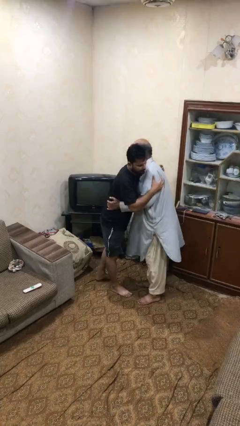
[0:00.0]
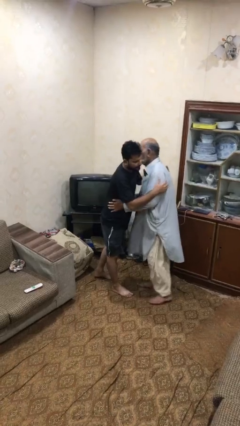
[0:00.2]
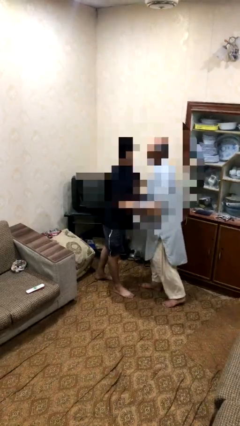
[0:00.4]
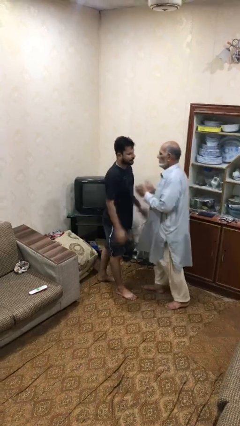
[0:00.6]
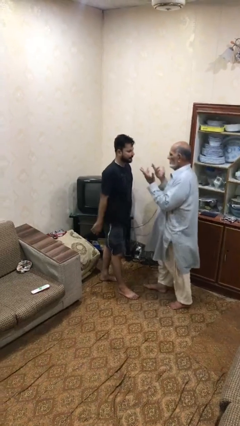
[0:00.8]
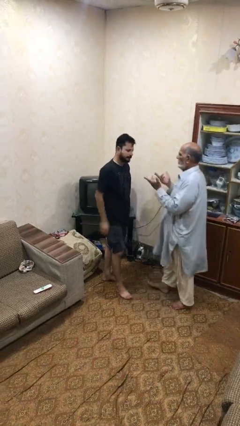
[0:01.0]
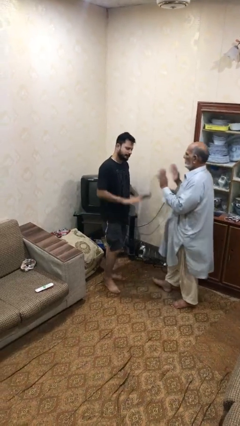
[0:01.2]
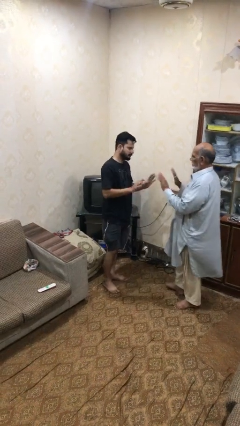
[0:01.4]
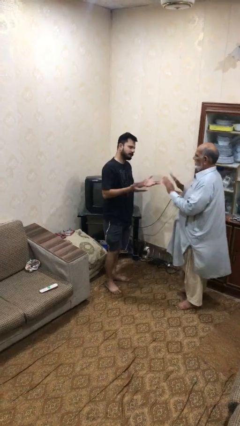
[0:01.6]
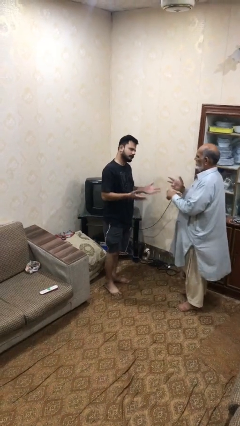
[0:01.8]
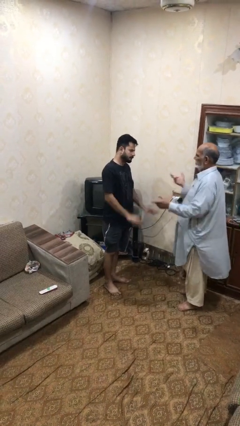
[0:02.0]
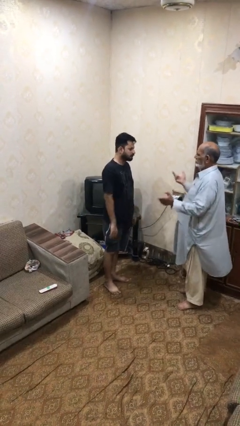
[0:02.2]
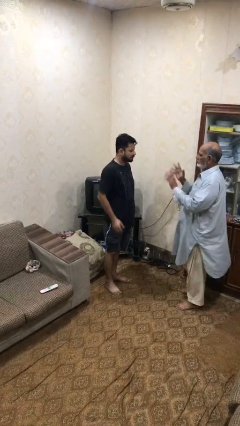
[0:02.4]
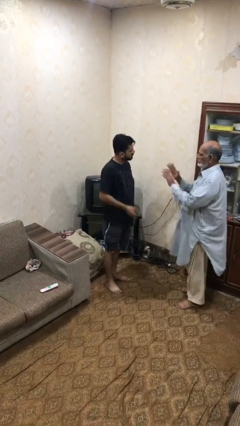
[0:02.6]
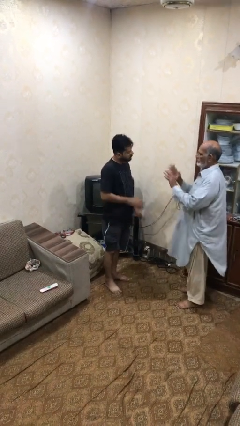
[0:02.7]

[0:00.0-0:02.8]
person talks to person

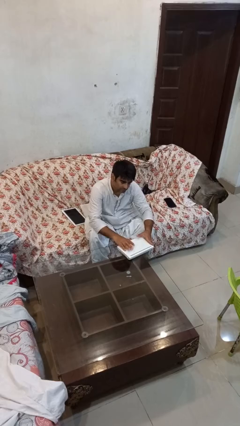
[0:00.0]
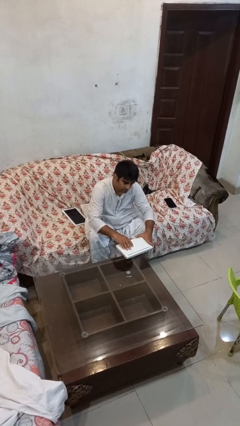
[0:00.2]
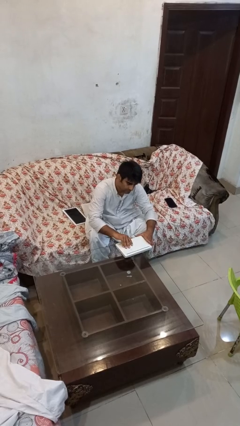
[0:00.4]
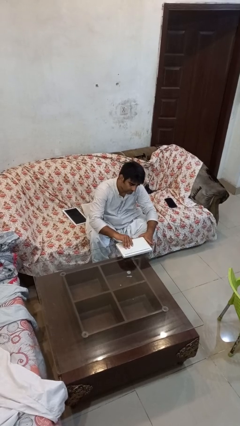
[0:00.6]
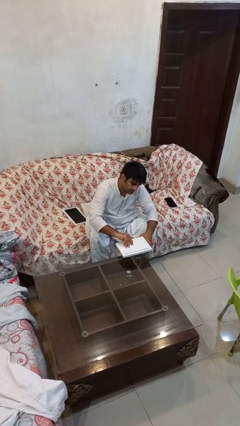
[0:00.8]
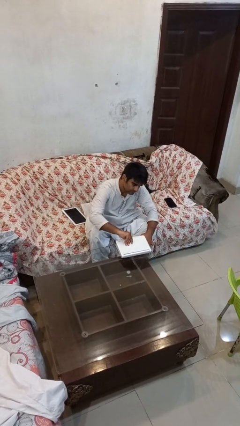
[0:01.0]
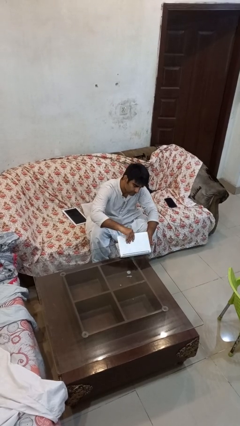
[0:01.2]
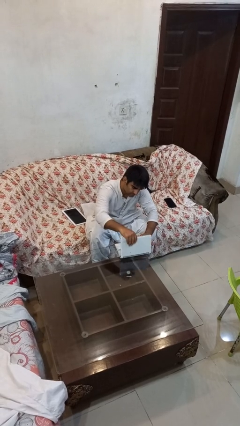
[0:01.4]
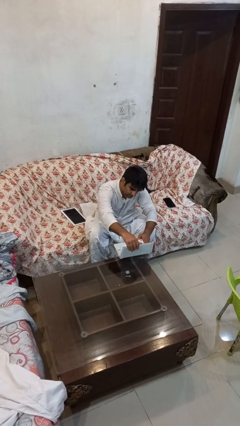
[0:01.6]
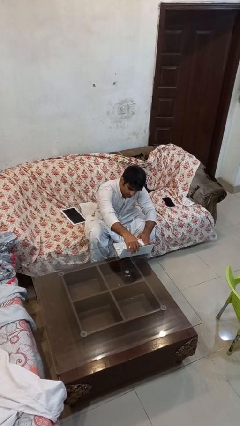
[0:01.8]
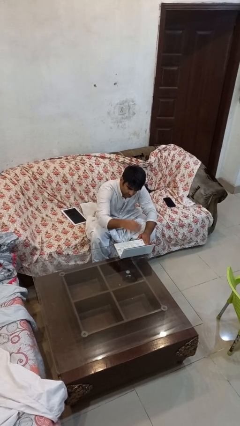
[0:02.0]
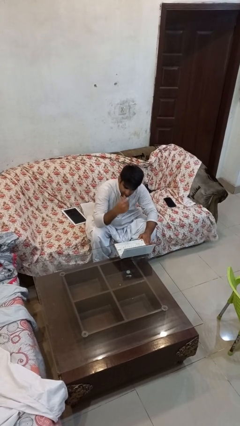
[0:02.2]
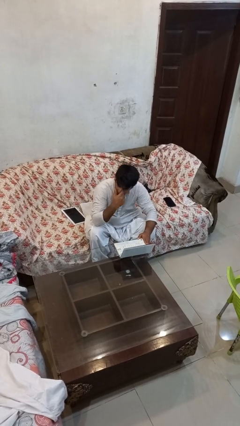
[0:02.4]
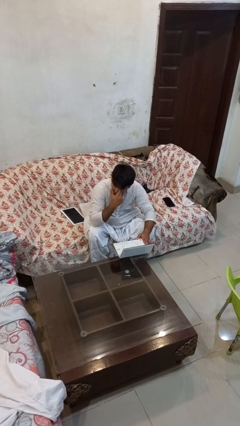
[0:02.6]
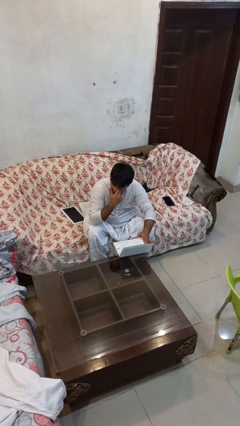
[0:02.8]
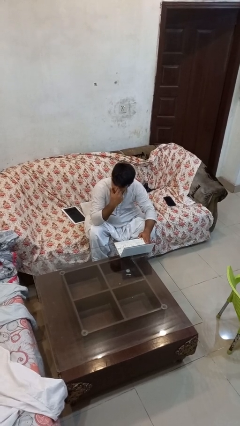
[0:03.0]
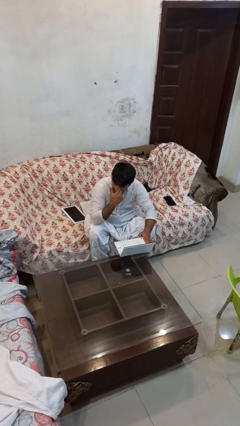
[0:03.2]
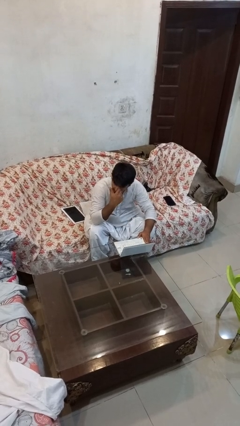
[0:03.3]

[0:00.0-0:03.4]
person opens laptop

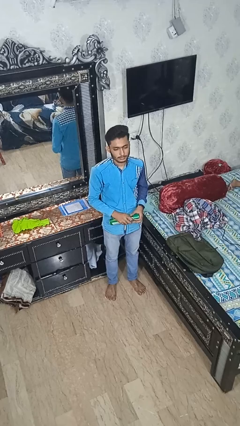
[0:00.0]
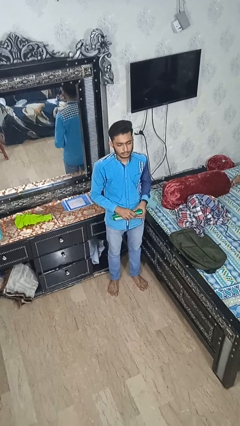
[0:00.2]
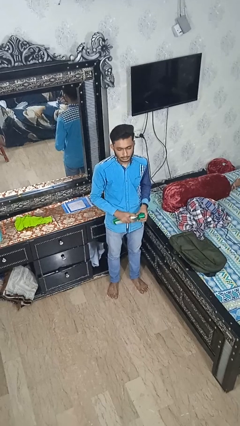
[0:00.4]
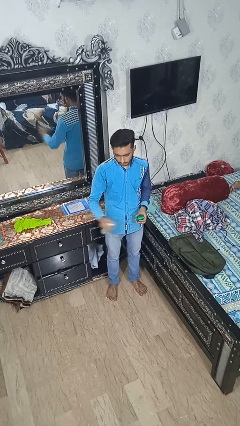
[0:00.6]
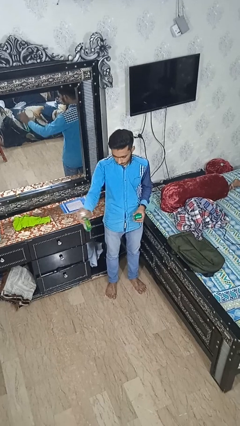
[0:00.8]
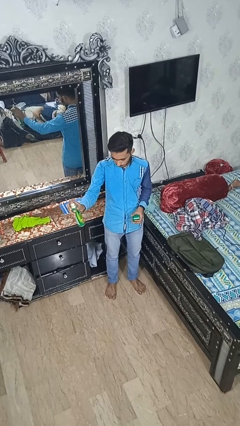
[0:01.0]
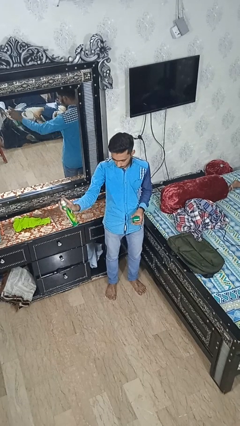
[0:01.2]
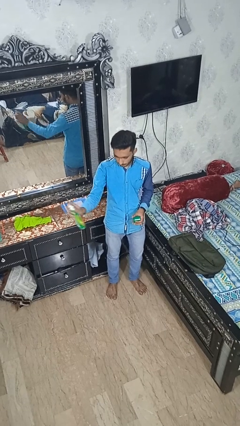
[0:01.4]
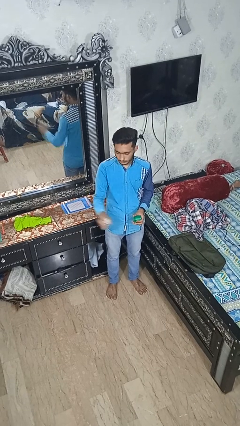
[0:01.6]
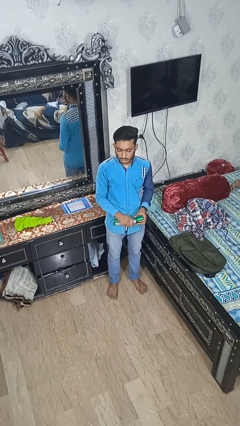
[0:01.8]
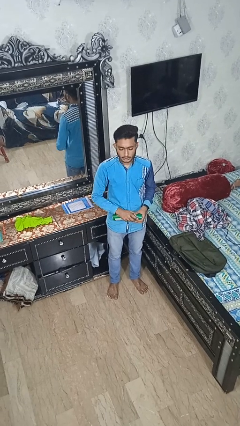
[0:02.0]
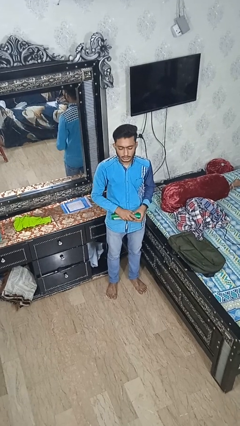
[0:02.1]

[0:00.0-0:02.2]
person sprays from bottle

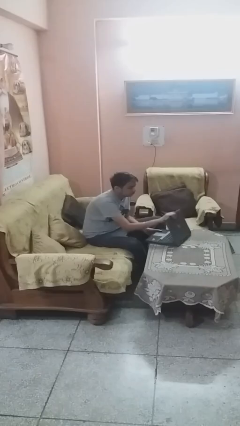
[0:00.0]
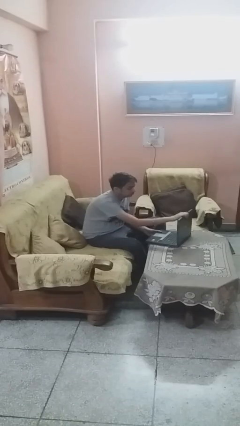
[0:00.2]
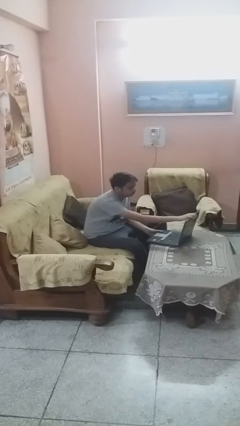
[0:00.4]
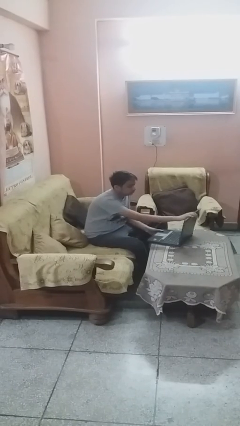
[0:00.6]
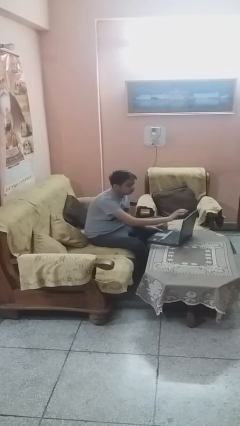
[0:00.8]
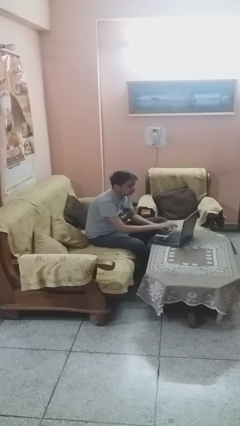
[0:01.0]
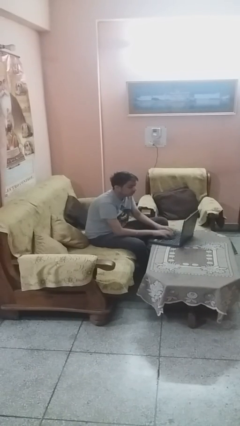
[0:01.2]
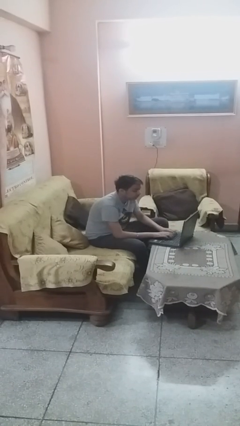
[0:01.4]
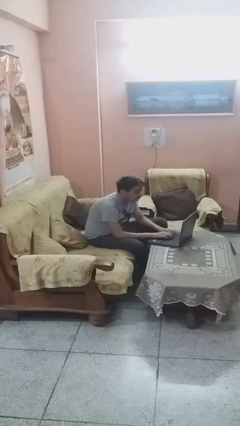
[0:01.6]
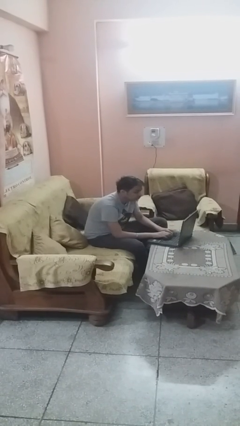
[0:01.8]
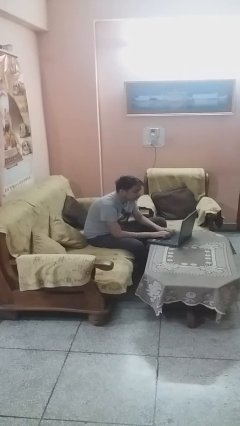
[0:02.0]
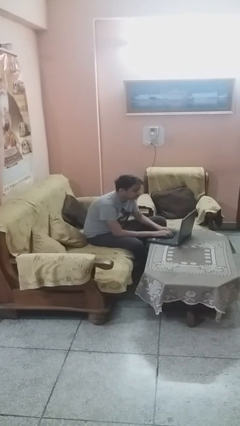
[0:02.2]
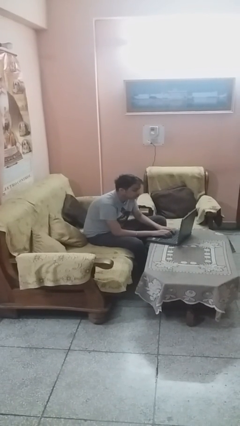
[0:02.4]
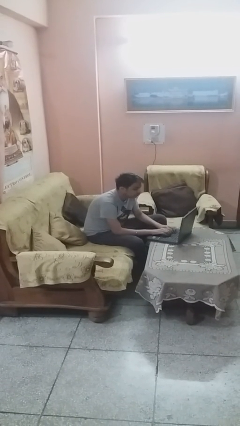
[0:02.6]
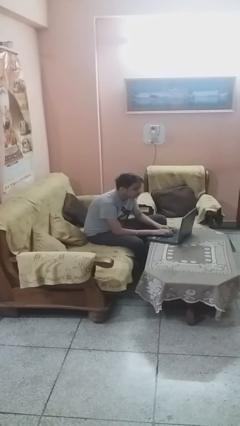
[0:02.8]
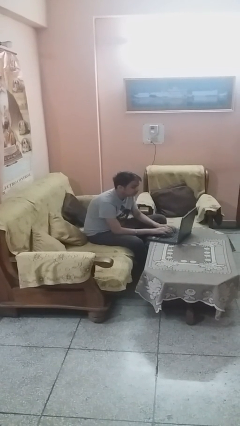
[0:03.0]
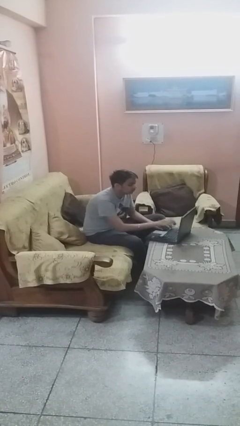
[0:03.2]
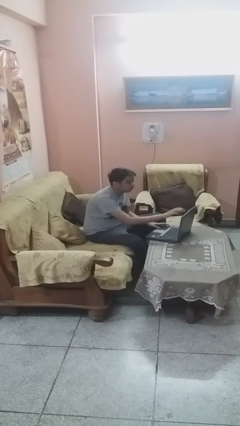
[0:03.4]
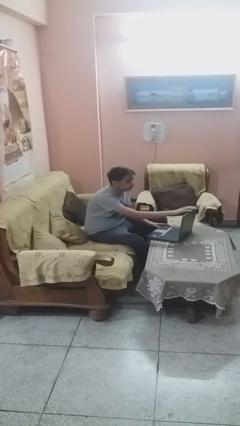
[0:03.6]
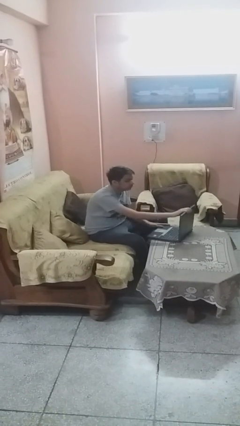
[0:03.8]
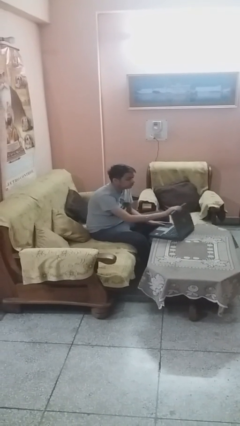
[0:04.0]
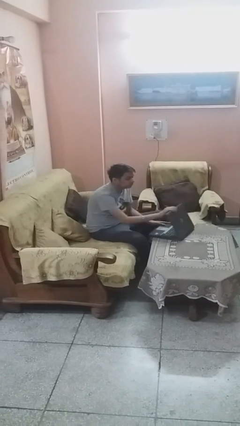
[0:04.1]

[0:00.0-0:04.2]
person interacts with laptop

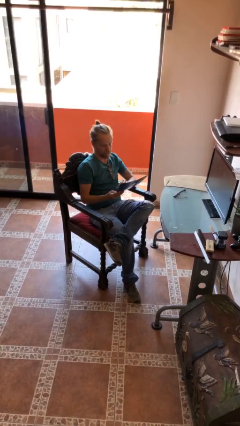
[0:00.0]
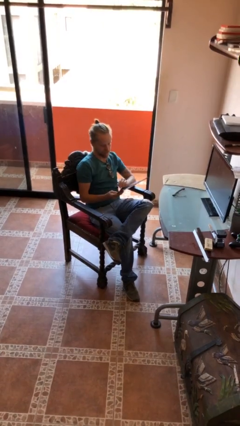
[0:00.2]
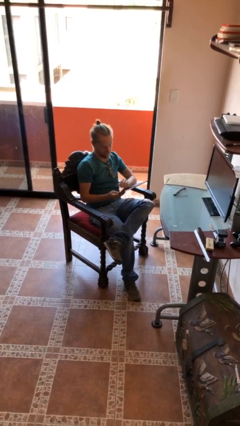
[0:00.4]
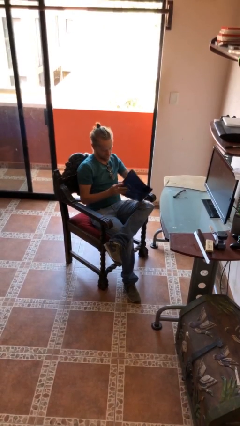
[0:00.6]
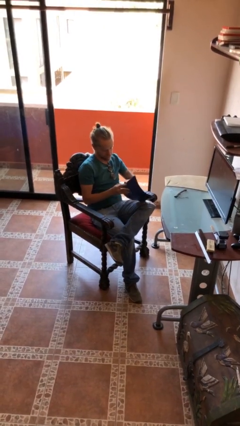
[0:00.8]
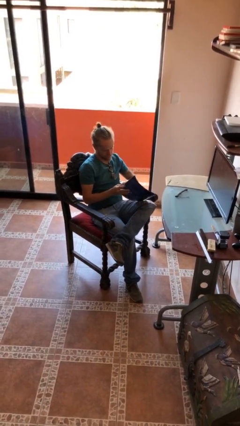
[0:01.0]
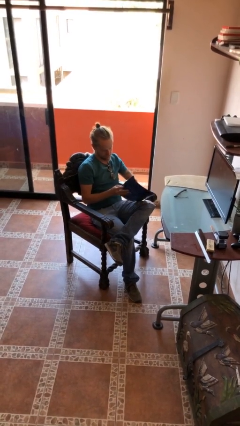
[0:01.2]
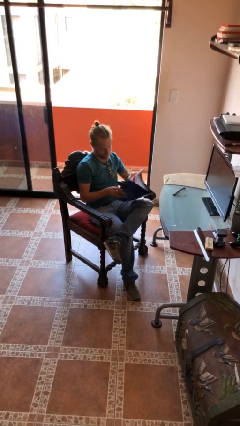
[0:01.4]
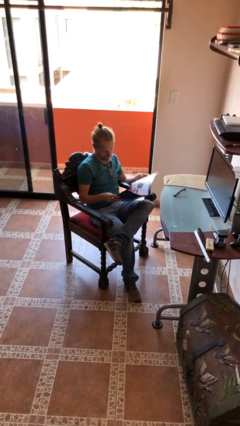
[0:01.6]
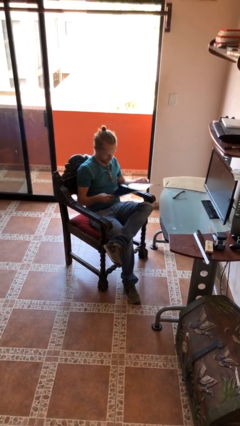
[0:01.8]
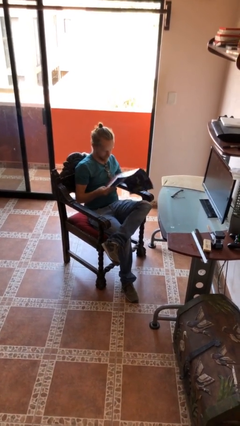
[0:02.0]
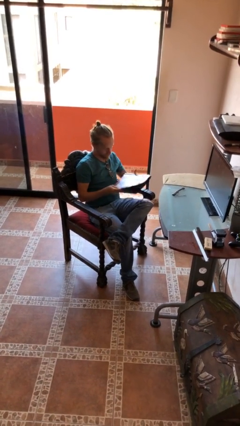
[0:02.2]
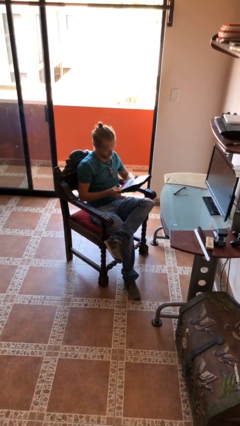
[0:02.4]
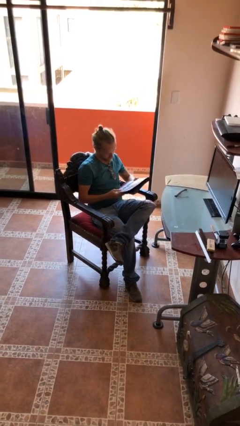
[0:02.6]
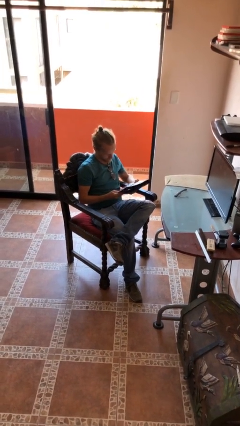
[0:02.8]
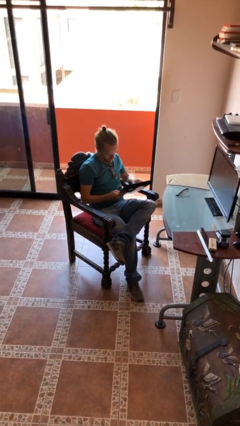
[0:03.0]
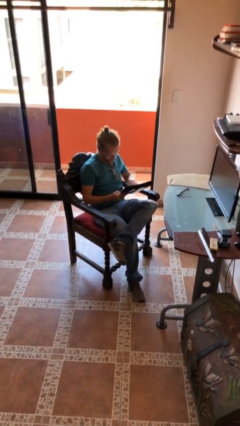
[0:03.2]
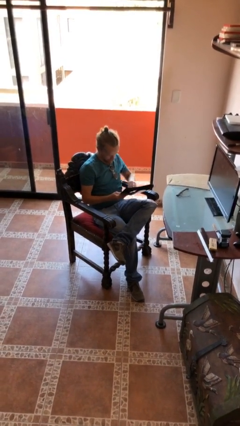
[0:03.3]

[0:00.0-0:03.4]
person reads document

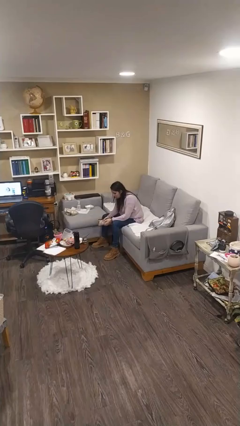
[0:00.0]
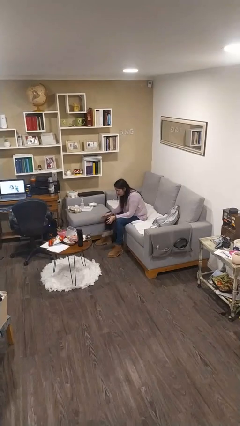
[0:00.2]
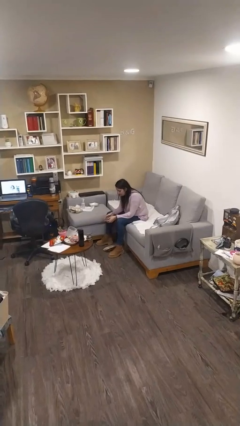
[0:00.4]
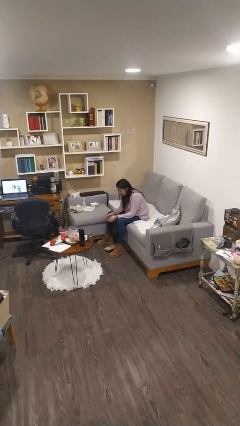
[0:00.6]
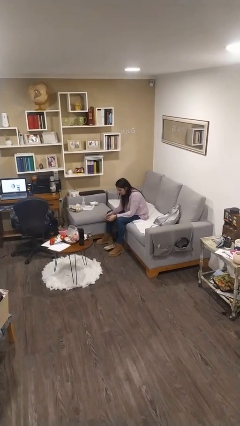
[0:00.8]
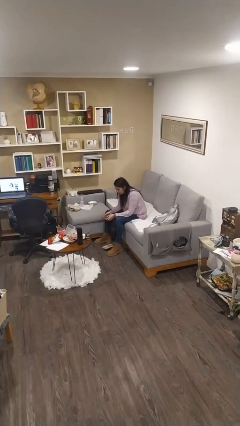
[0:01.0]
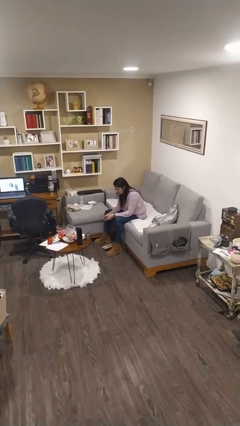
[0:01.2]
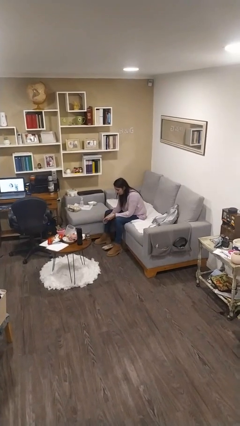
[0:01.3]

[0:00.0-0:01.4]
person drops object
